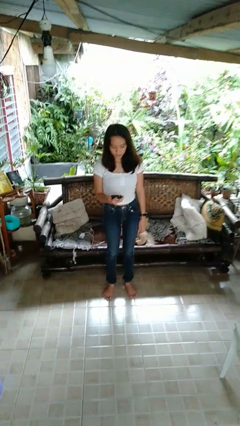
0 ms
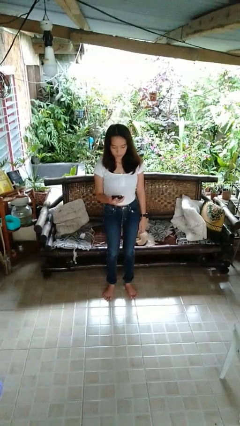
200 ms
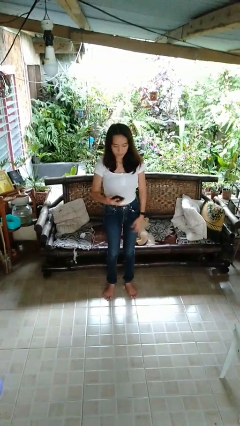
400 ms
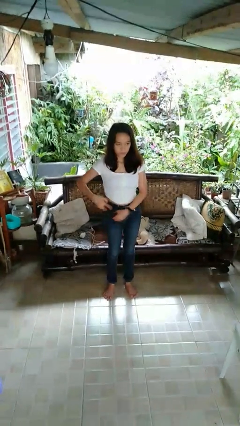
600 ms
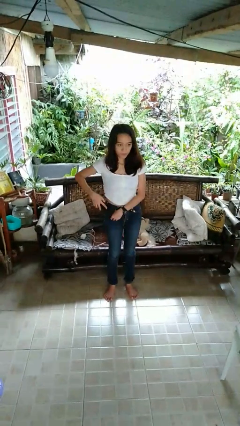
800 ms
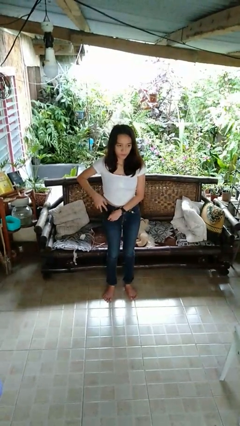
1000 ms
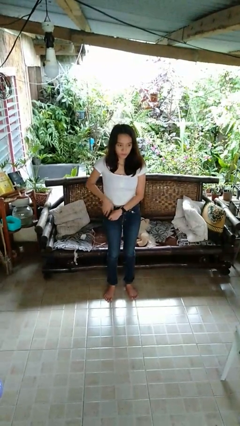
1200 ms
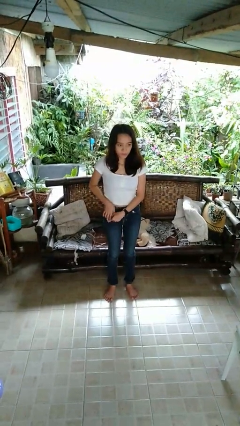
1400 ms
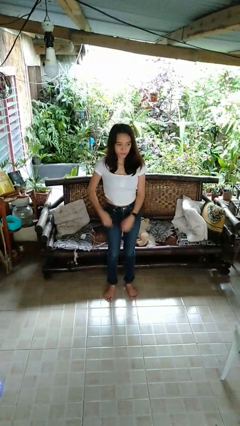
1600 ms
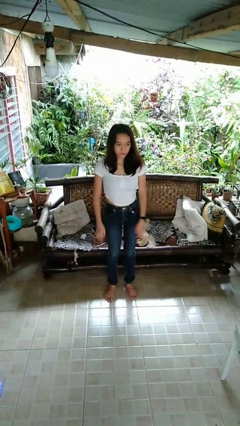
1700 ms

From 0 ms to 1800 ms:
person puts phone into pocket

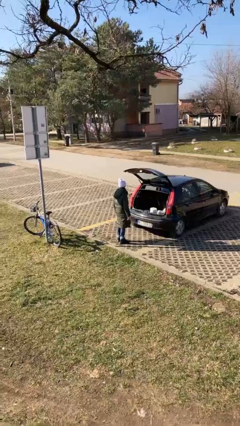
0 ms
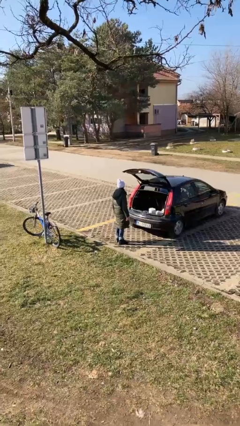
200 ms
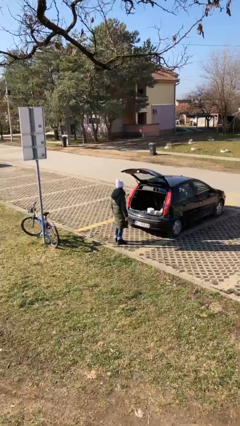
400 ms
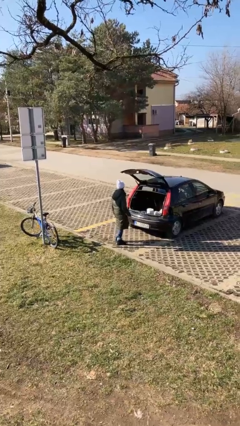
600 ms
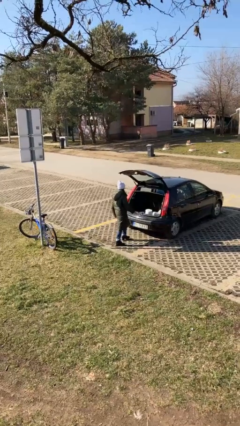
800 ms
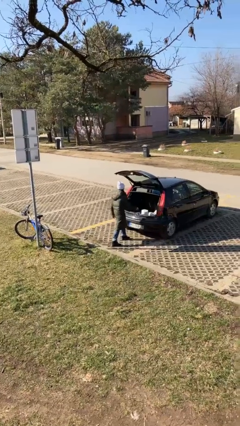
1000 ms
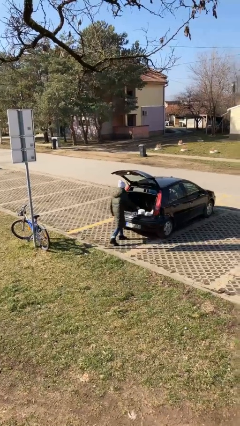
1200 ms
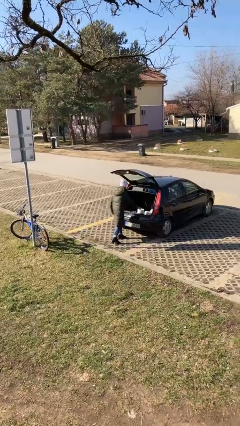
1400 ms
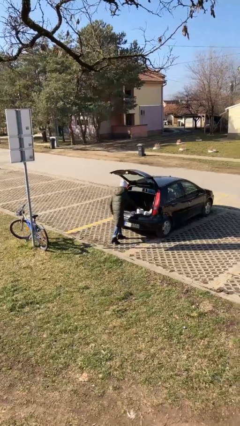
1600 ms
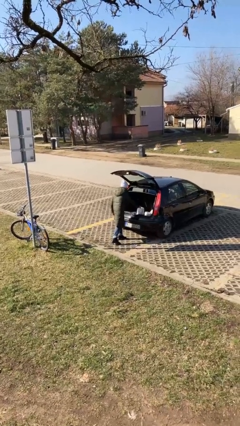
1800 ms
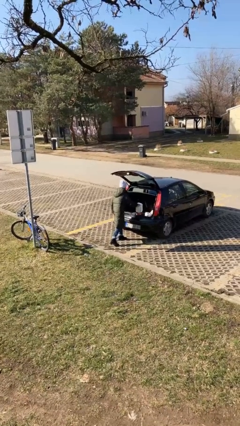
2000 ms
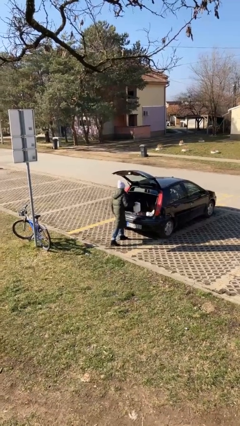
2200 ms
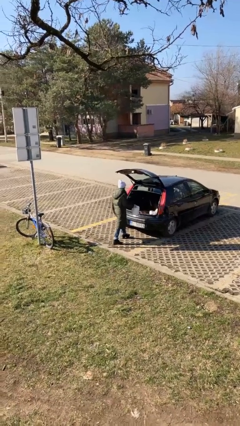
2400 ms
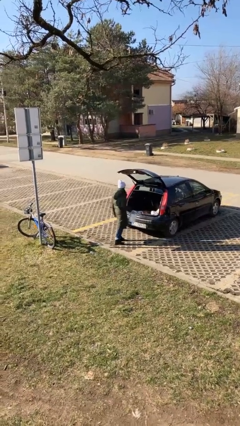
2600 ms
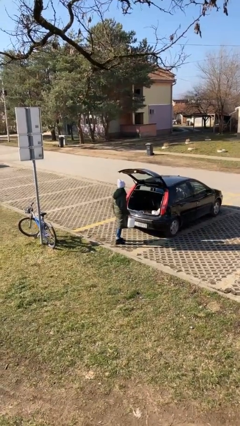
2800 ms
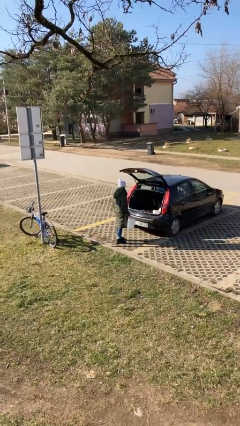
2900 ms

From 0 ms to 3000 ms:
person unloads car

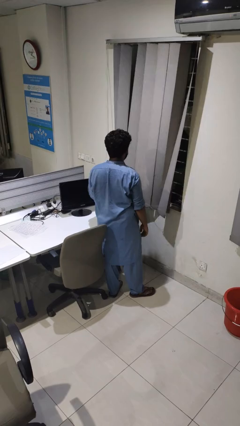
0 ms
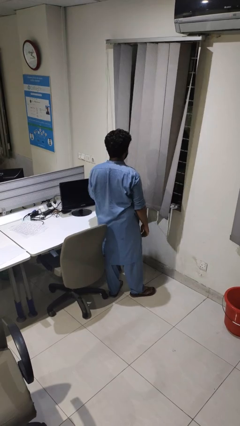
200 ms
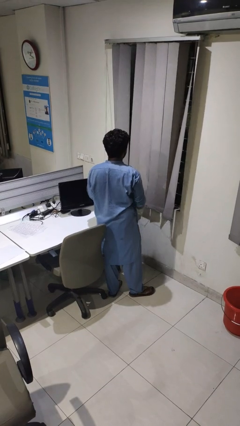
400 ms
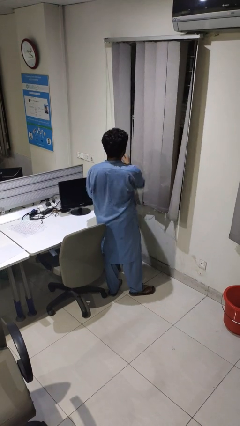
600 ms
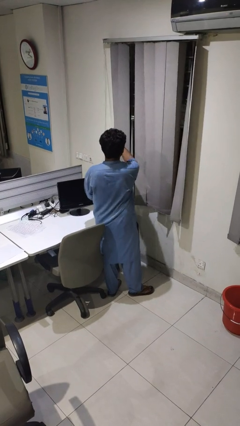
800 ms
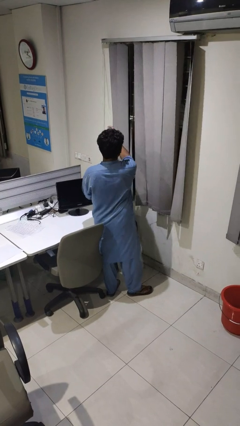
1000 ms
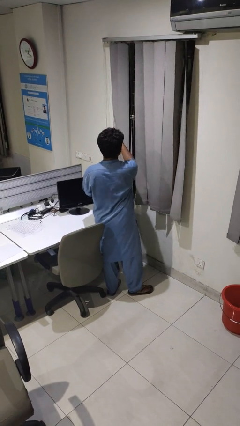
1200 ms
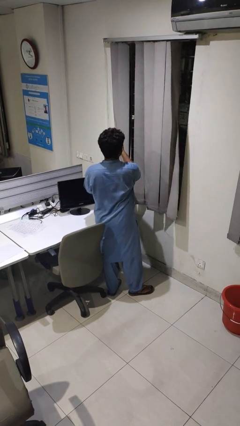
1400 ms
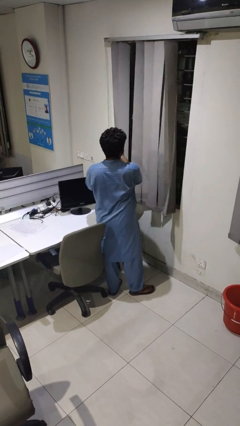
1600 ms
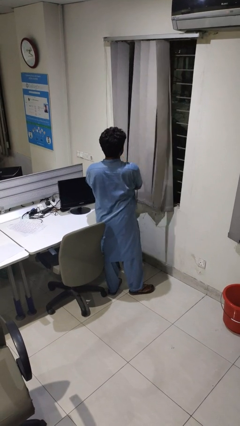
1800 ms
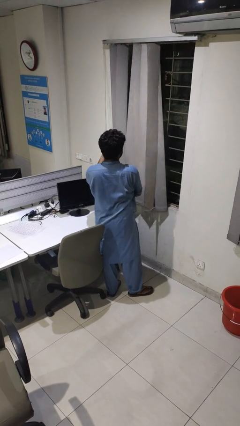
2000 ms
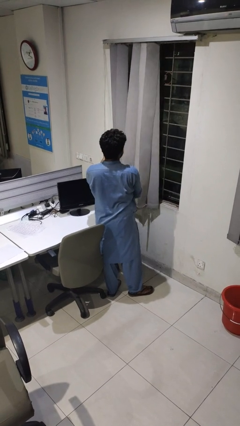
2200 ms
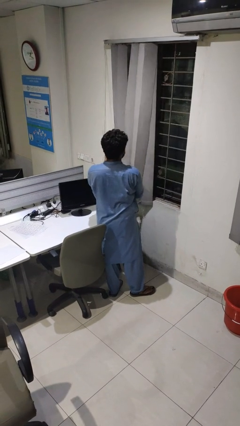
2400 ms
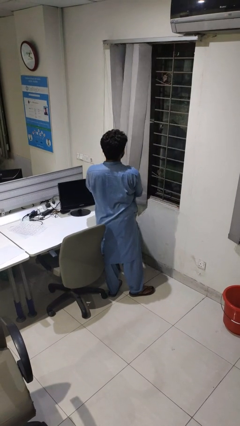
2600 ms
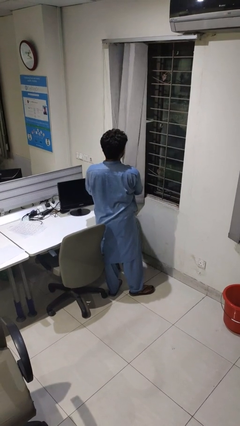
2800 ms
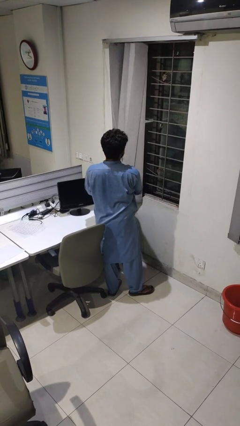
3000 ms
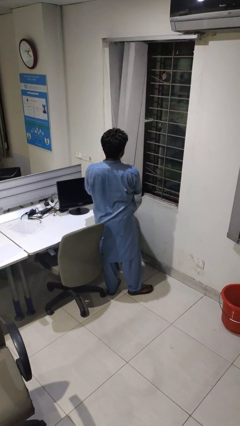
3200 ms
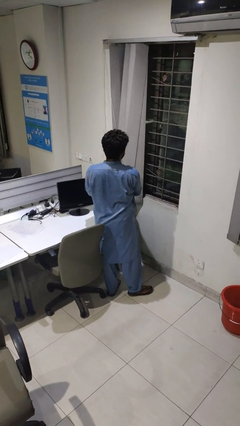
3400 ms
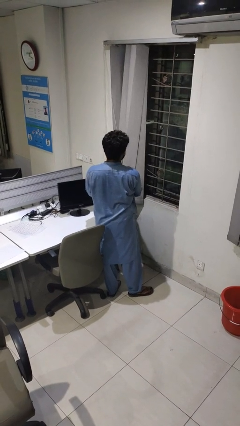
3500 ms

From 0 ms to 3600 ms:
person opens curtains

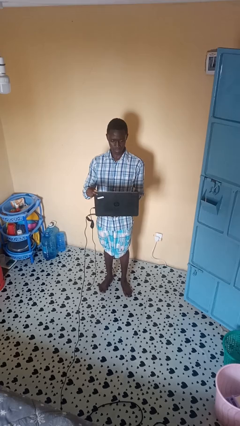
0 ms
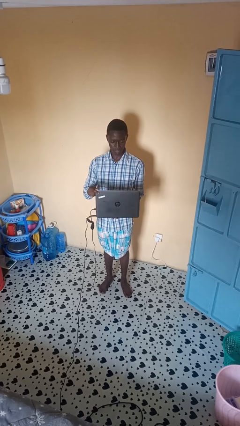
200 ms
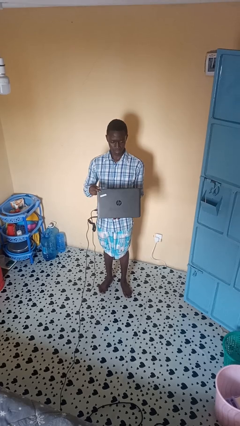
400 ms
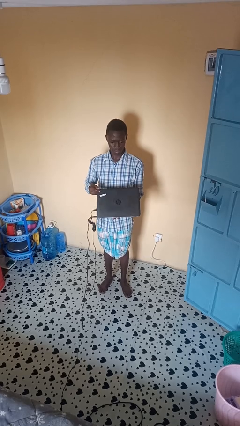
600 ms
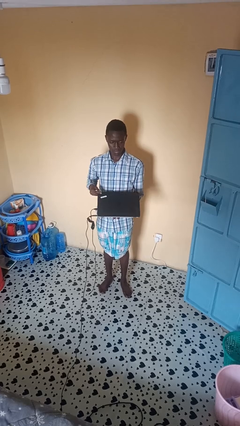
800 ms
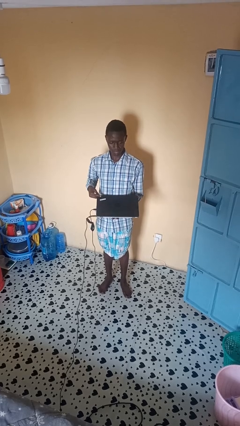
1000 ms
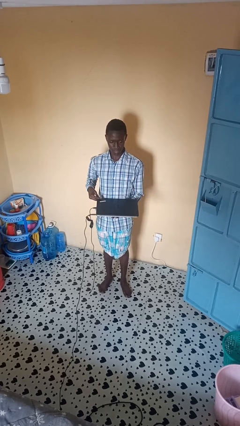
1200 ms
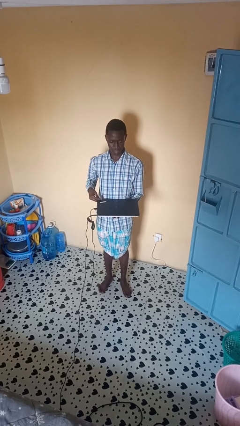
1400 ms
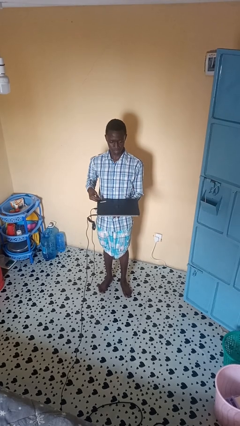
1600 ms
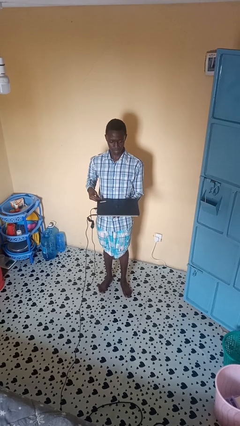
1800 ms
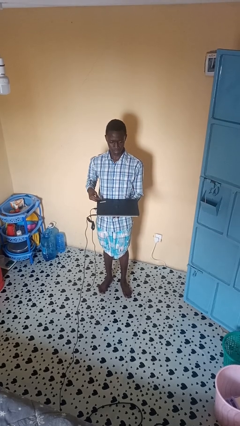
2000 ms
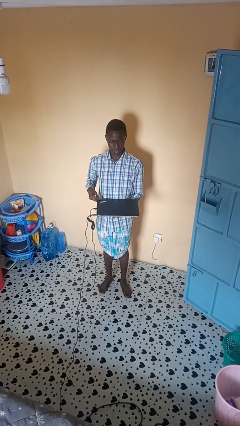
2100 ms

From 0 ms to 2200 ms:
person closes laptop

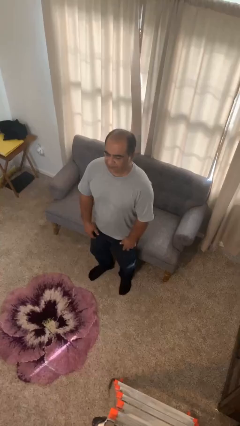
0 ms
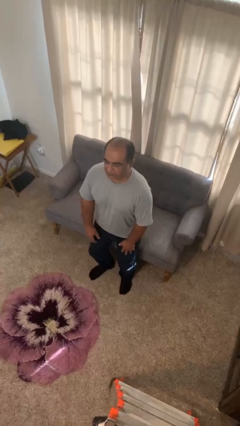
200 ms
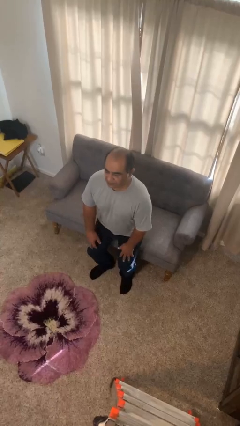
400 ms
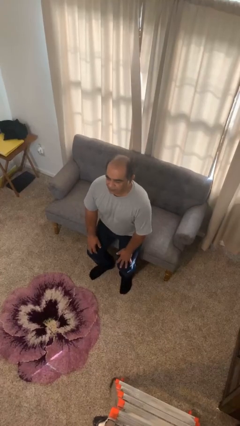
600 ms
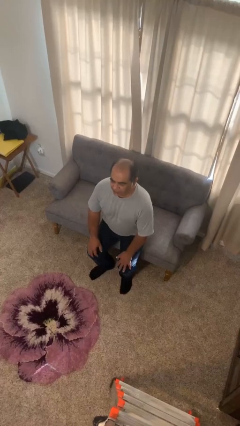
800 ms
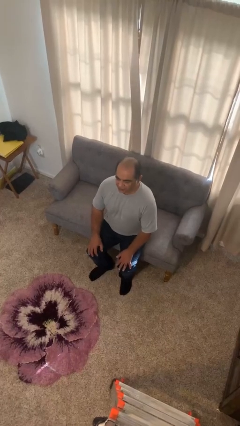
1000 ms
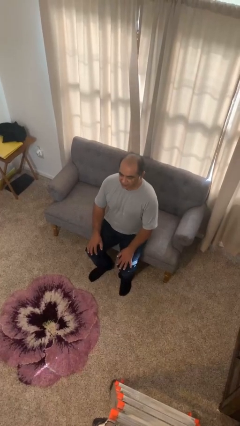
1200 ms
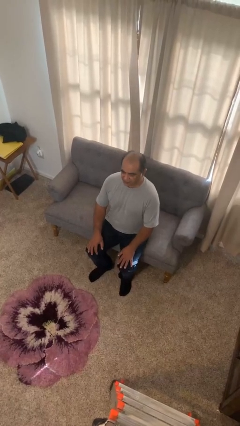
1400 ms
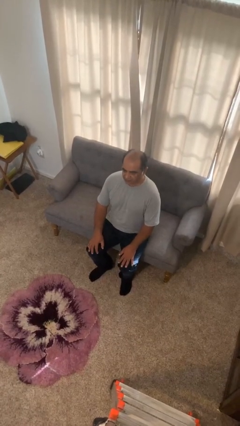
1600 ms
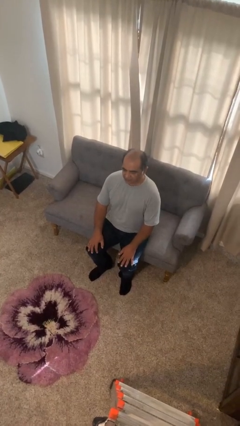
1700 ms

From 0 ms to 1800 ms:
person sits down

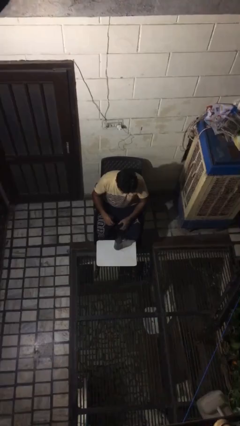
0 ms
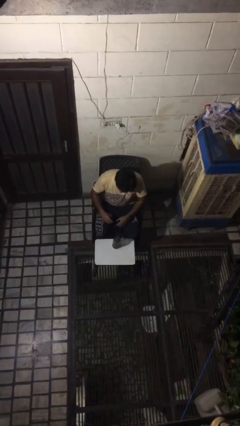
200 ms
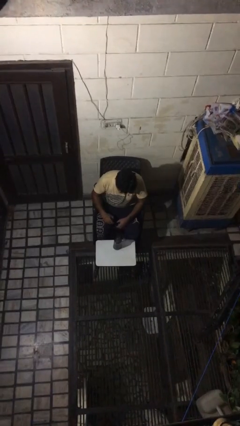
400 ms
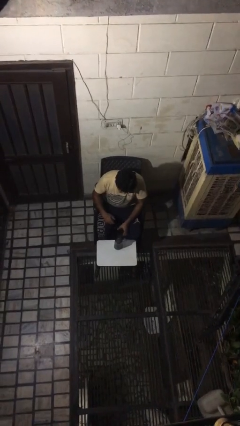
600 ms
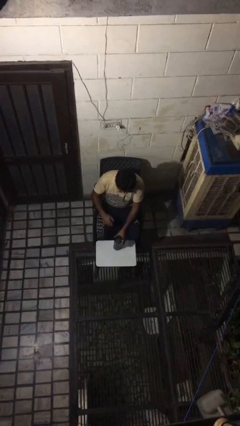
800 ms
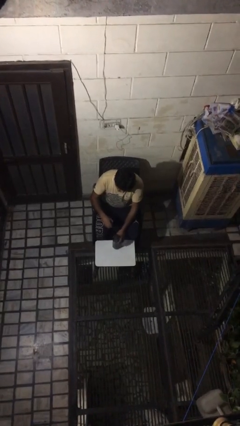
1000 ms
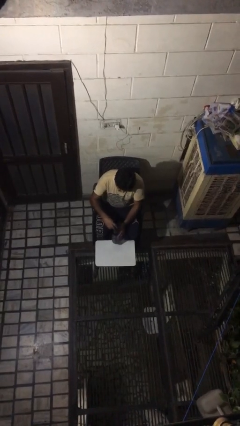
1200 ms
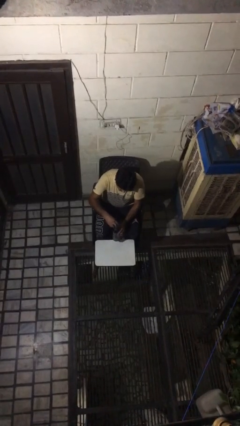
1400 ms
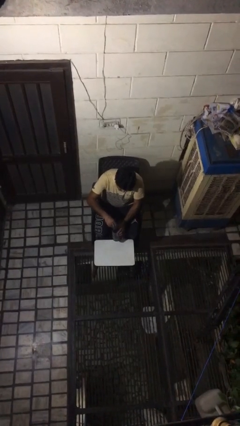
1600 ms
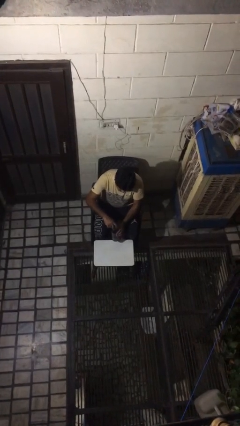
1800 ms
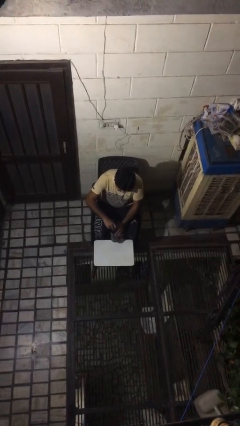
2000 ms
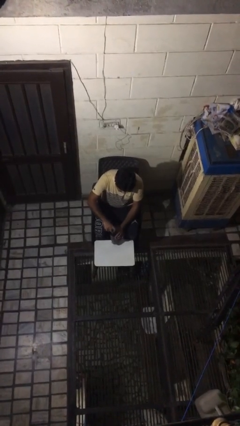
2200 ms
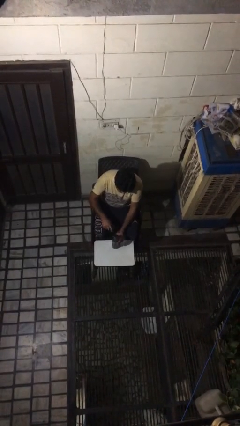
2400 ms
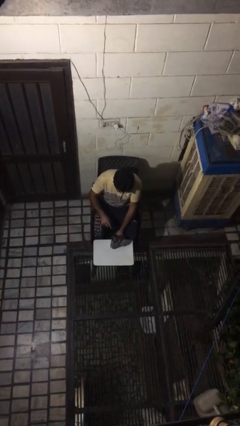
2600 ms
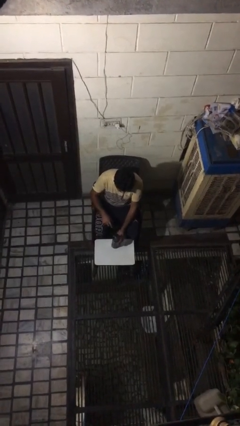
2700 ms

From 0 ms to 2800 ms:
person screws lid to bottle

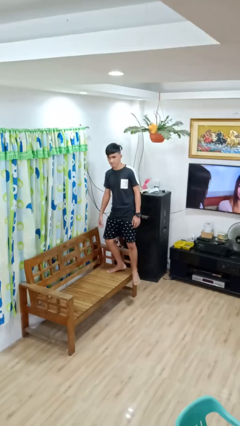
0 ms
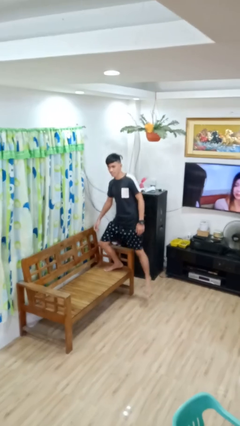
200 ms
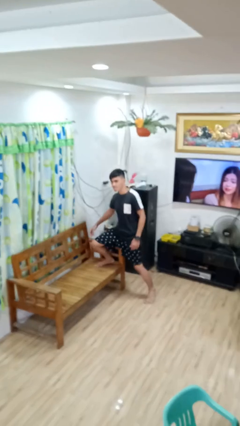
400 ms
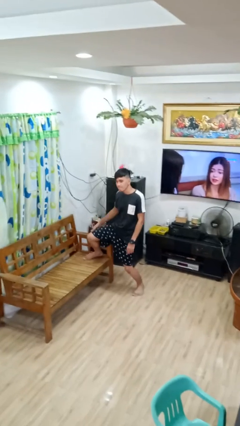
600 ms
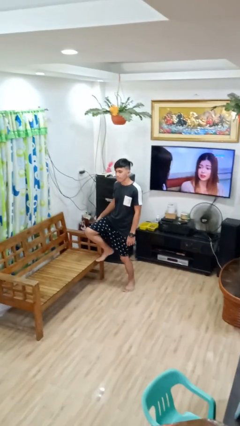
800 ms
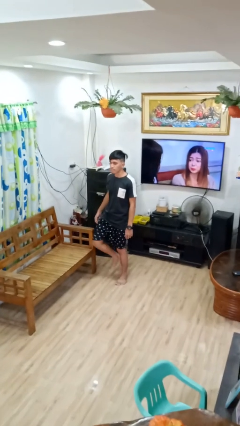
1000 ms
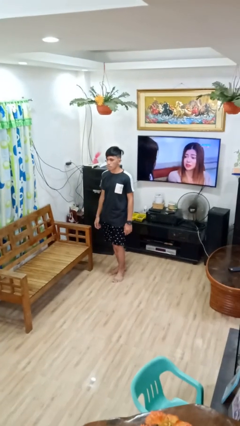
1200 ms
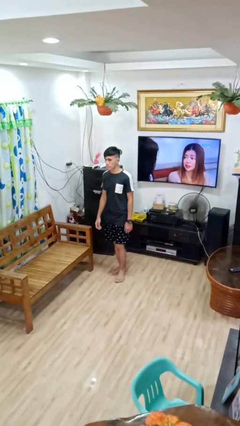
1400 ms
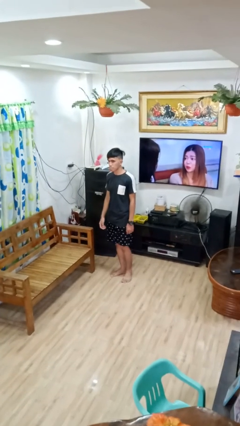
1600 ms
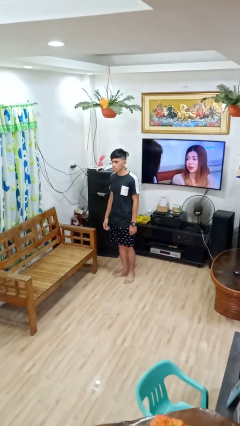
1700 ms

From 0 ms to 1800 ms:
person climbs off couch
